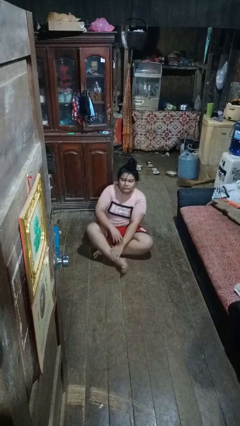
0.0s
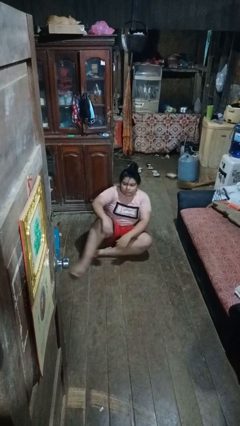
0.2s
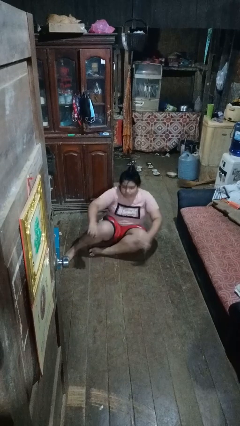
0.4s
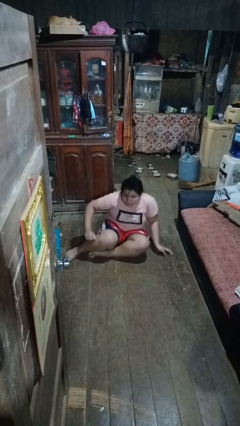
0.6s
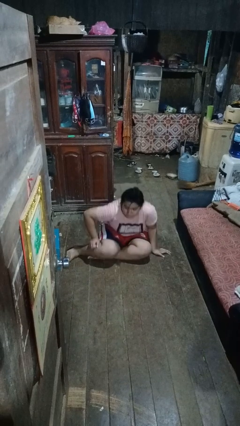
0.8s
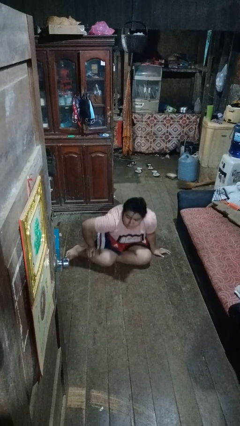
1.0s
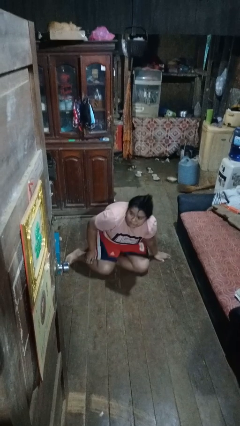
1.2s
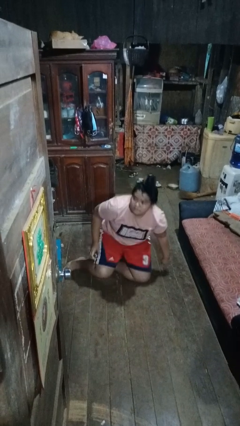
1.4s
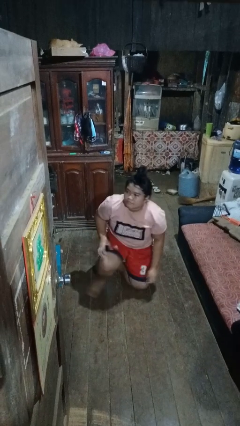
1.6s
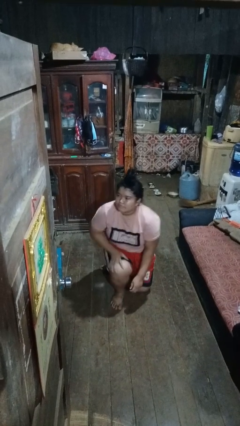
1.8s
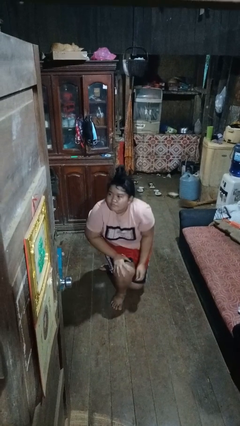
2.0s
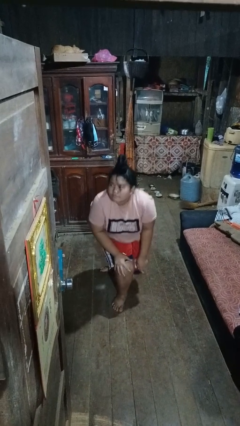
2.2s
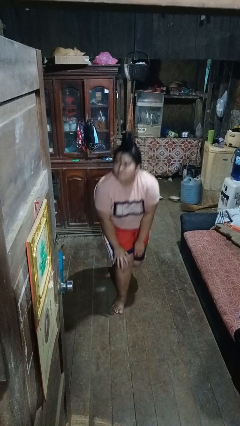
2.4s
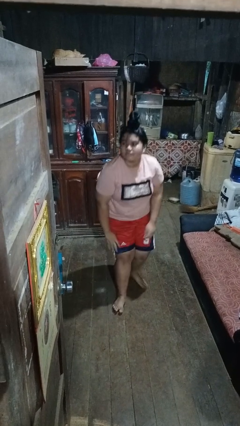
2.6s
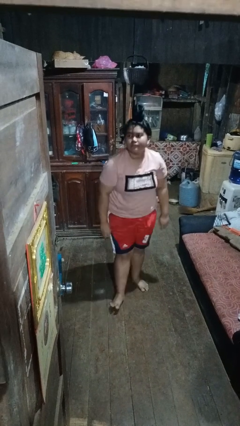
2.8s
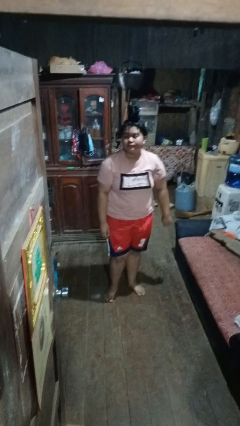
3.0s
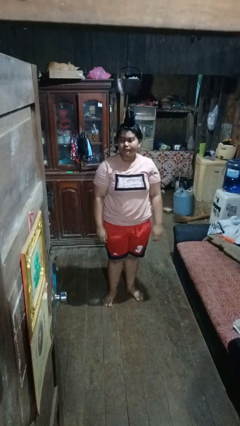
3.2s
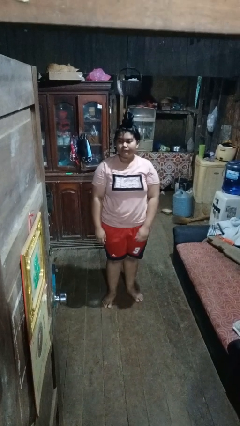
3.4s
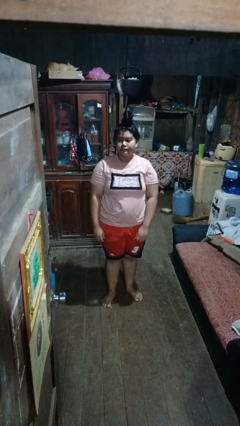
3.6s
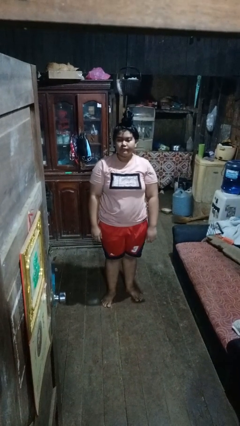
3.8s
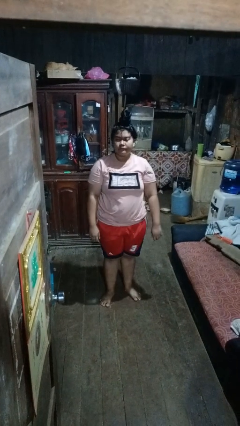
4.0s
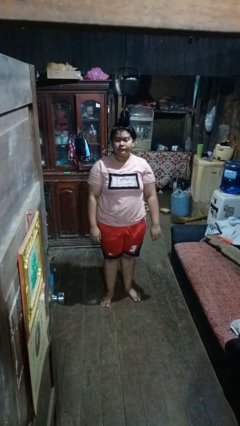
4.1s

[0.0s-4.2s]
person stands up from floor

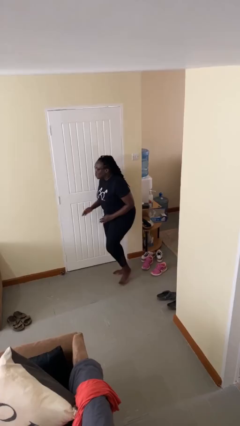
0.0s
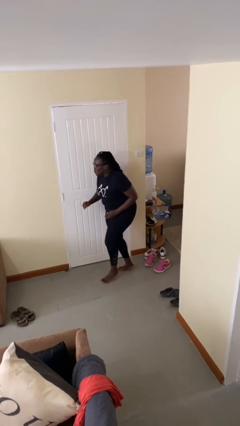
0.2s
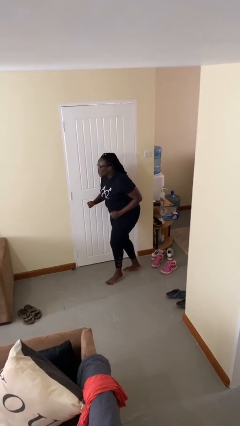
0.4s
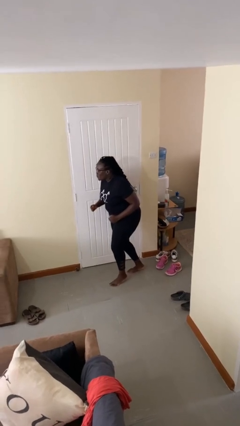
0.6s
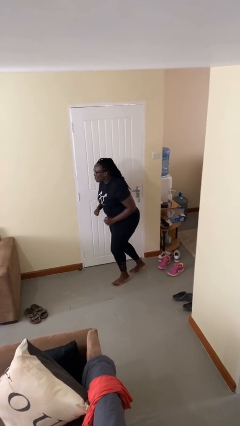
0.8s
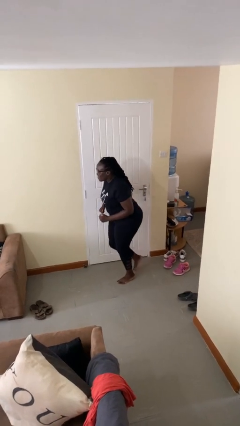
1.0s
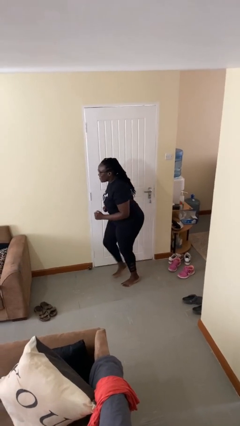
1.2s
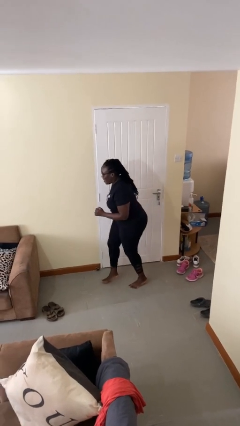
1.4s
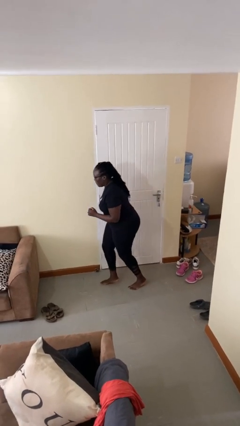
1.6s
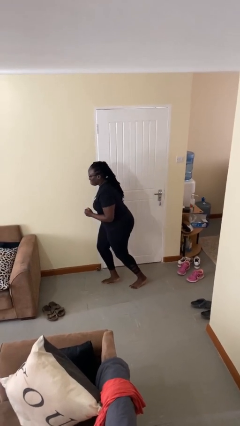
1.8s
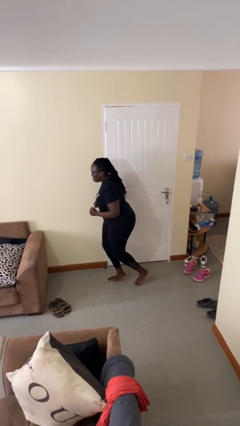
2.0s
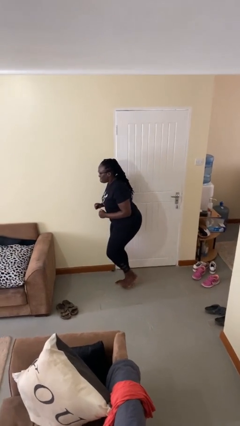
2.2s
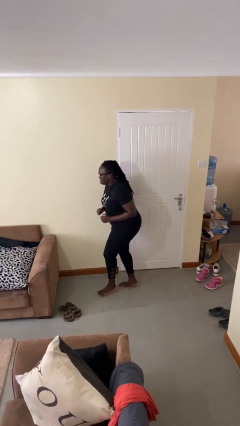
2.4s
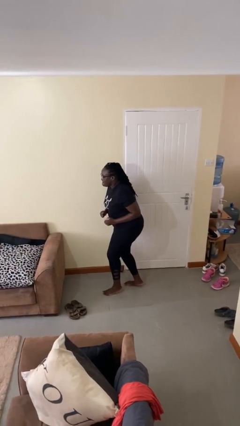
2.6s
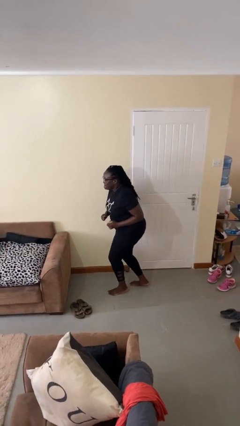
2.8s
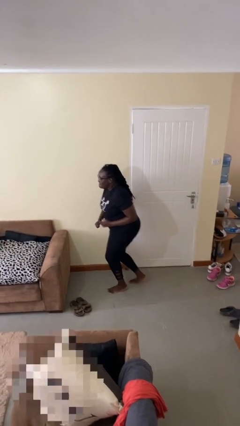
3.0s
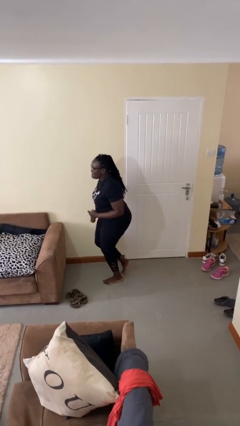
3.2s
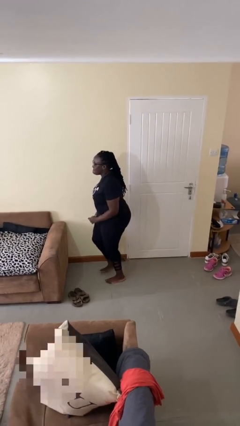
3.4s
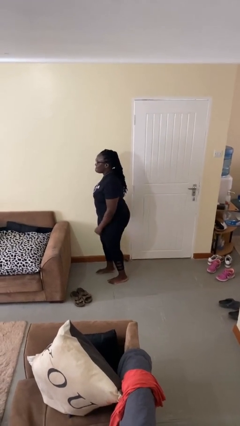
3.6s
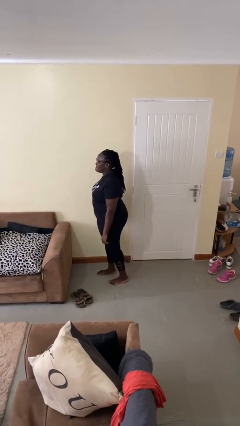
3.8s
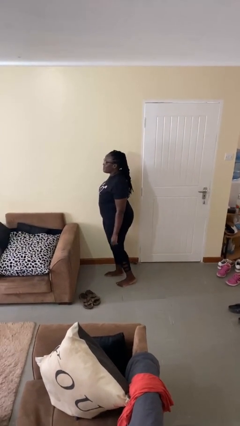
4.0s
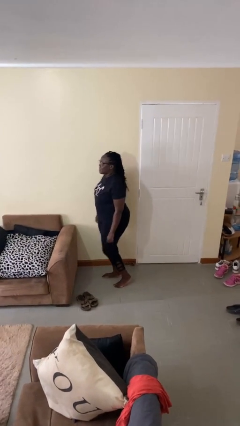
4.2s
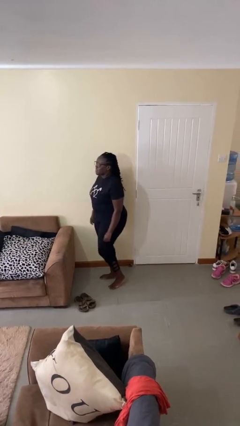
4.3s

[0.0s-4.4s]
person walks tiptoe

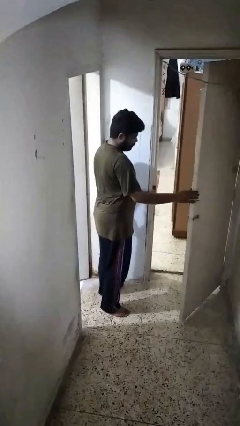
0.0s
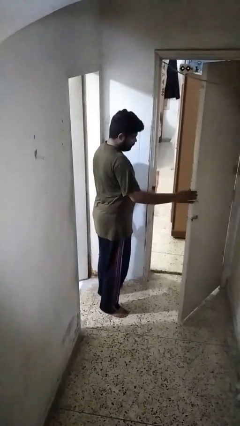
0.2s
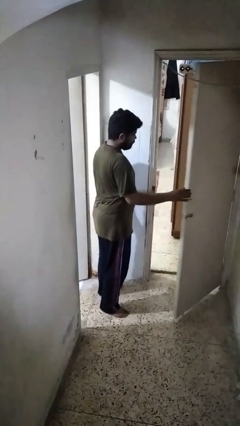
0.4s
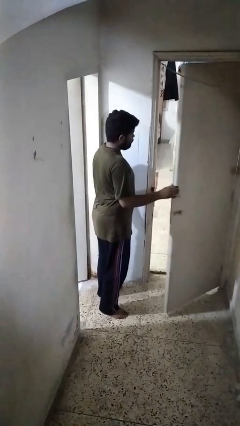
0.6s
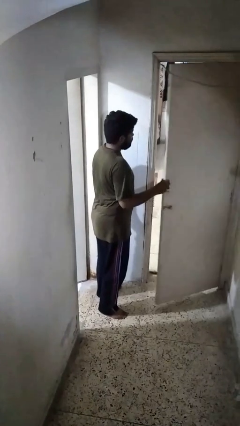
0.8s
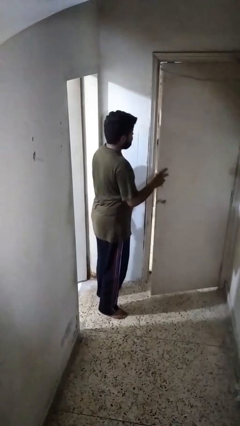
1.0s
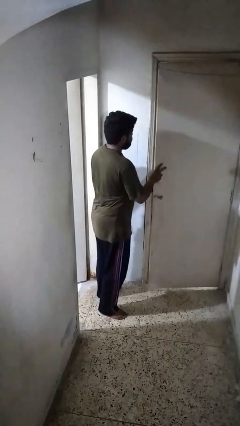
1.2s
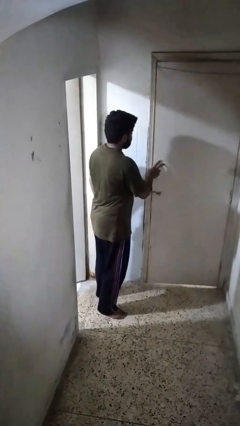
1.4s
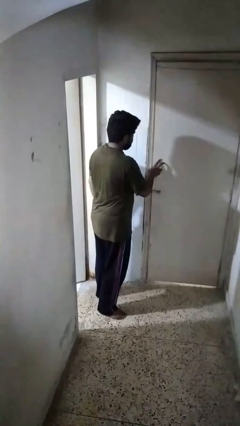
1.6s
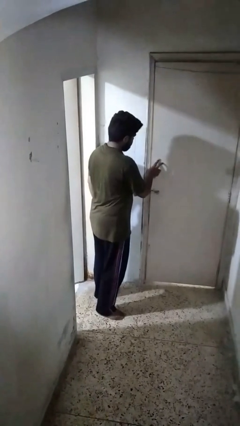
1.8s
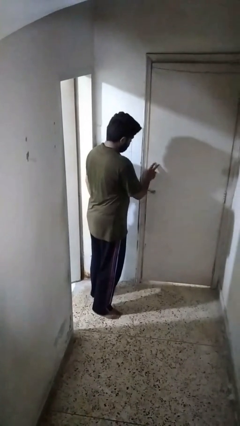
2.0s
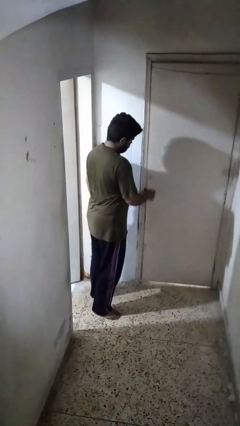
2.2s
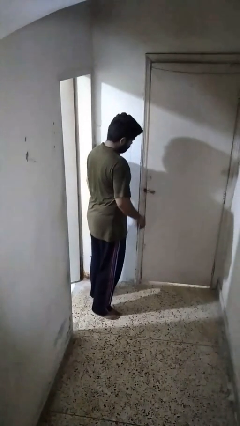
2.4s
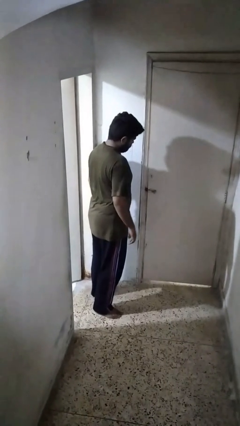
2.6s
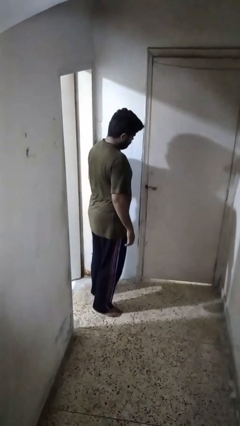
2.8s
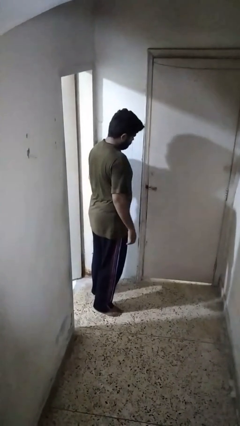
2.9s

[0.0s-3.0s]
person closes facility door

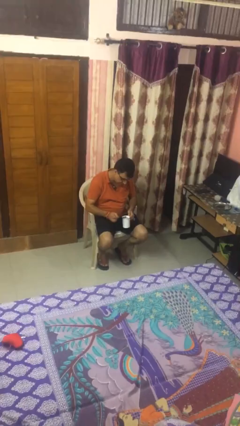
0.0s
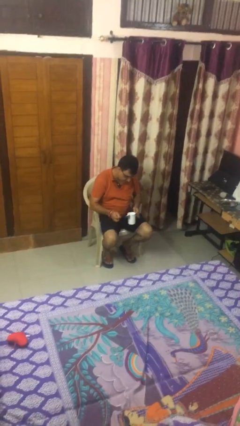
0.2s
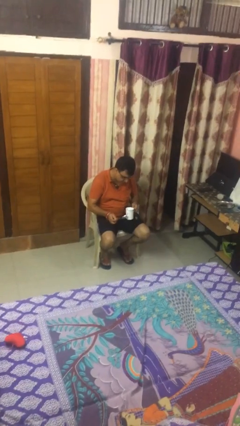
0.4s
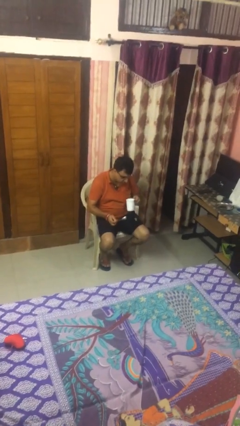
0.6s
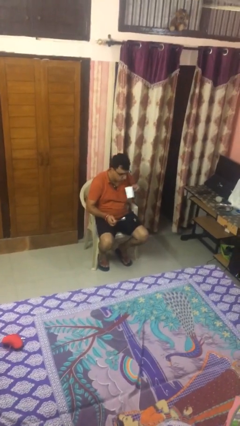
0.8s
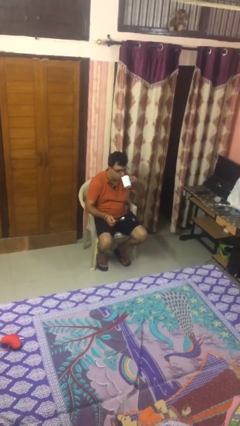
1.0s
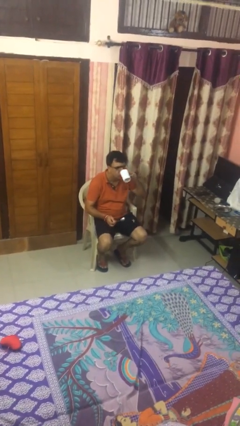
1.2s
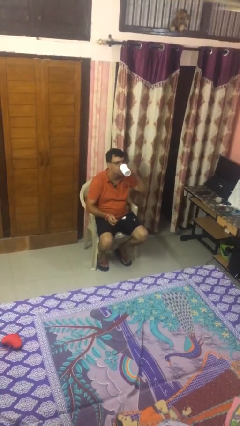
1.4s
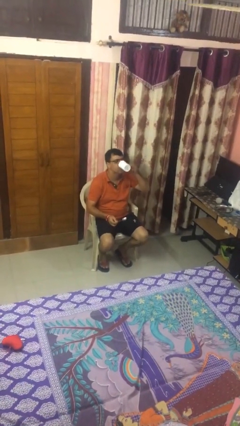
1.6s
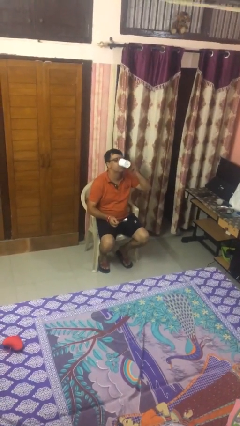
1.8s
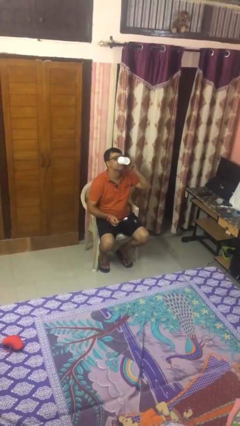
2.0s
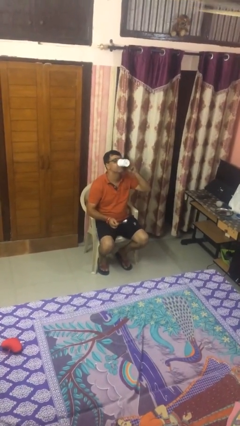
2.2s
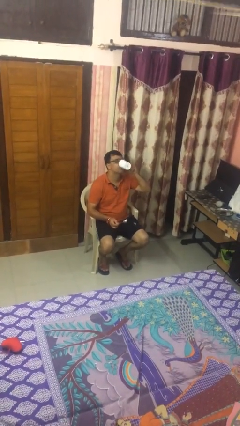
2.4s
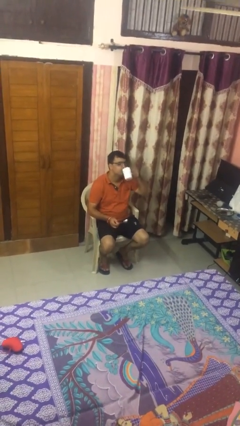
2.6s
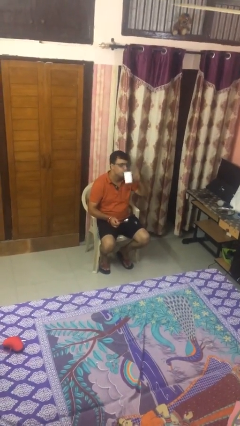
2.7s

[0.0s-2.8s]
person drinks from mug

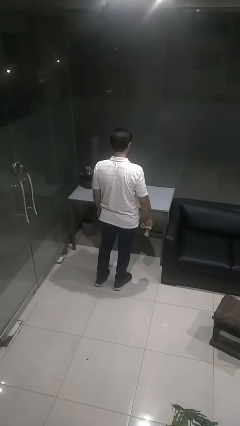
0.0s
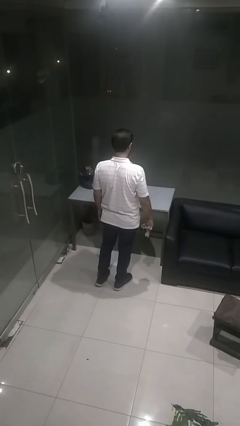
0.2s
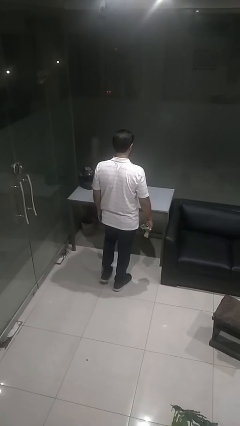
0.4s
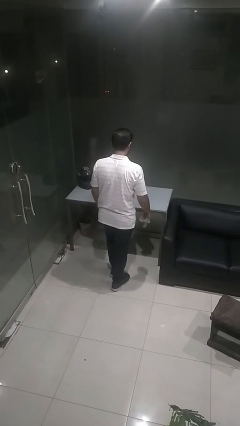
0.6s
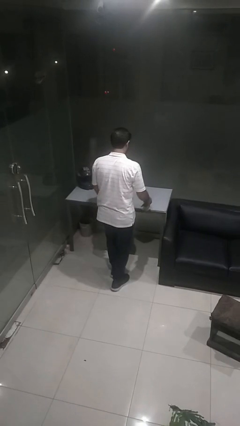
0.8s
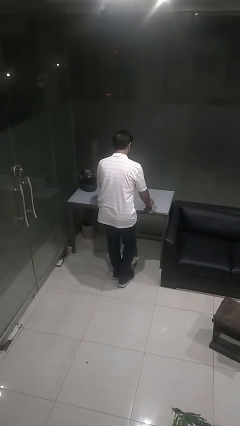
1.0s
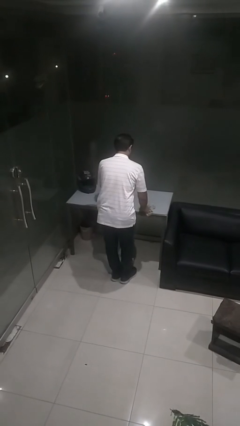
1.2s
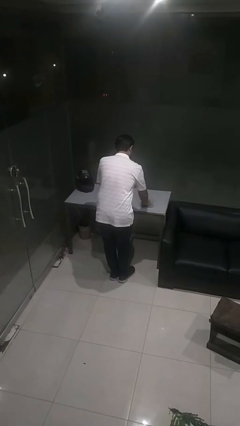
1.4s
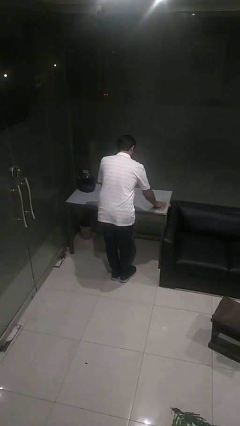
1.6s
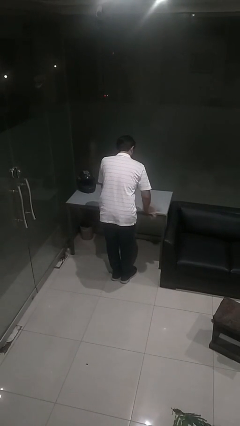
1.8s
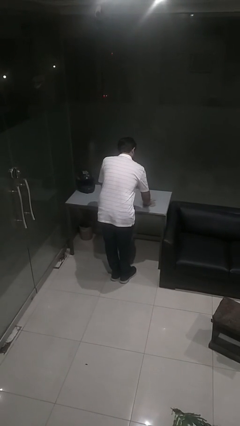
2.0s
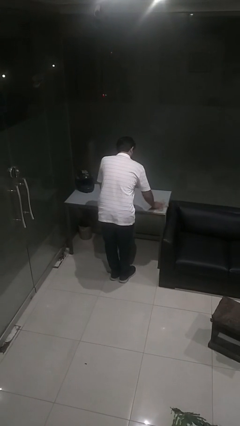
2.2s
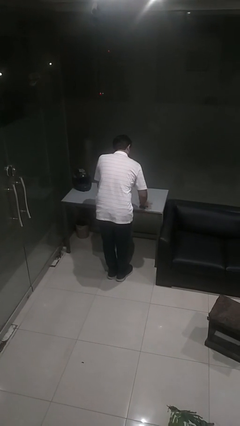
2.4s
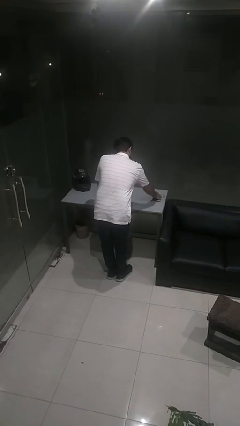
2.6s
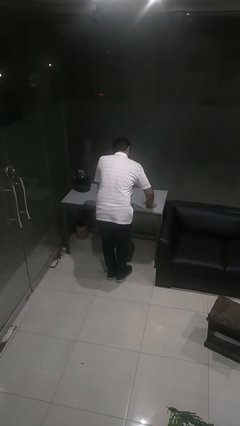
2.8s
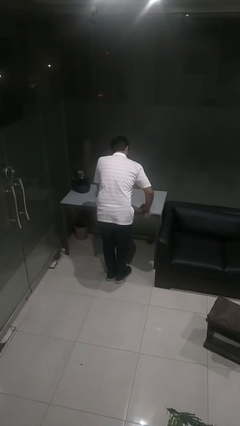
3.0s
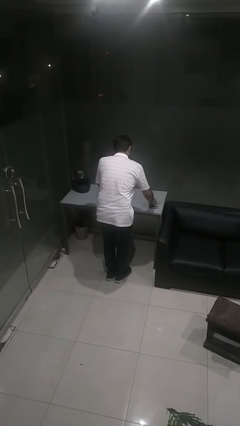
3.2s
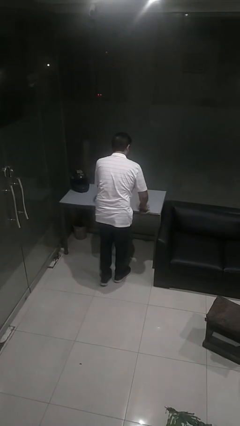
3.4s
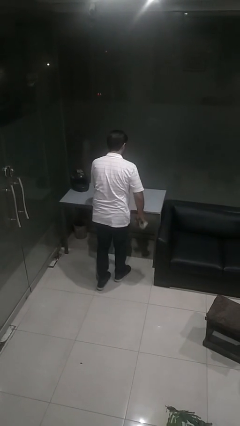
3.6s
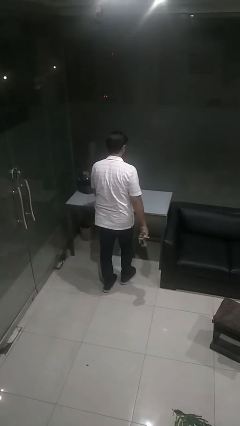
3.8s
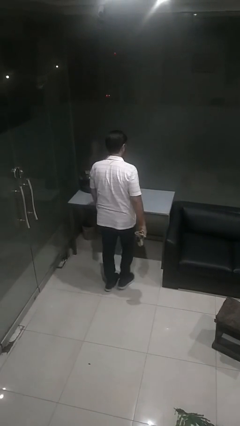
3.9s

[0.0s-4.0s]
person cleans table with rag
